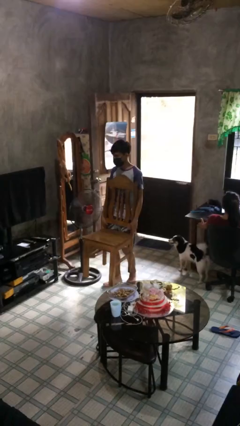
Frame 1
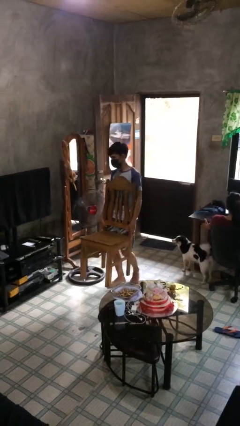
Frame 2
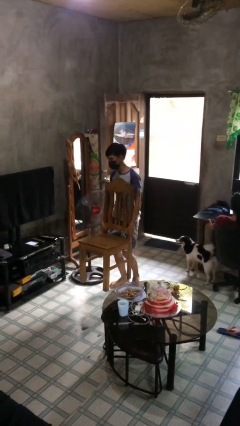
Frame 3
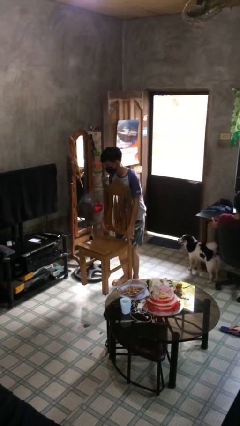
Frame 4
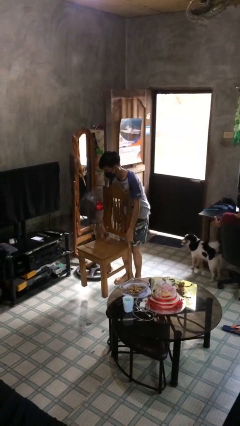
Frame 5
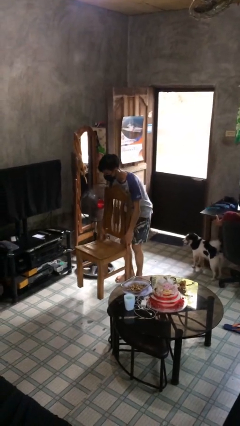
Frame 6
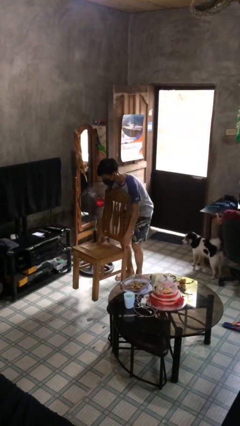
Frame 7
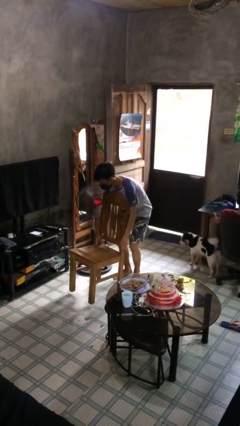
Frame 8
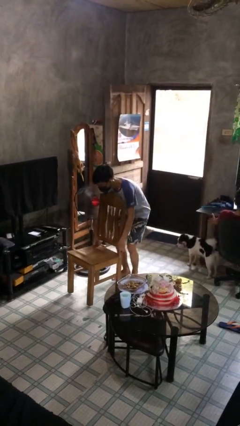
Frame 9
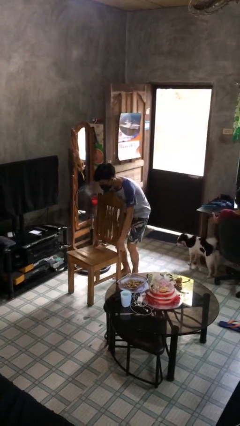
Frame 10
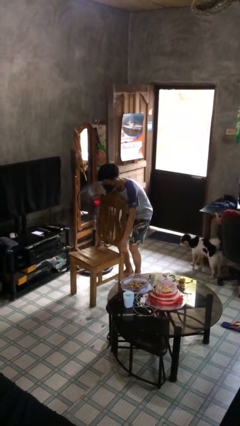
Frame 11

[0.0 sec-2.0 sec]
person puts down object on floor

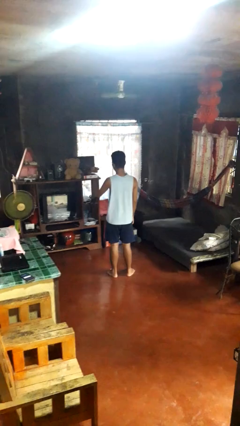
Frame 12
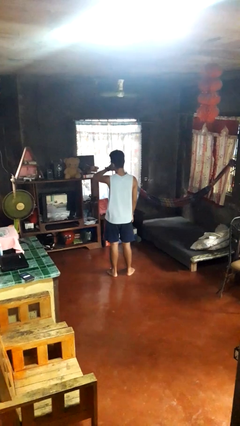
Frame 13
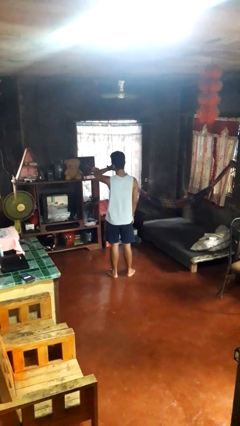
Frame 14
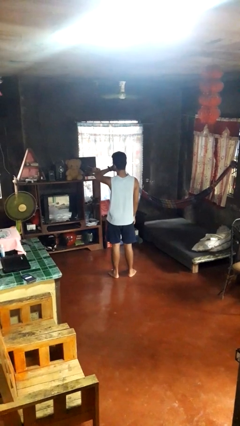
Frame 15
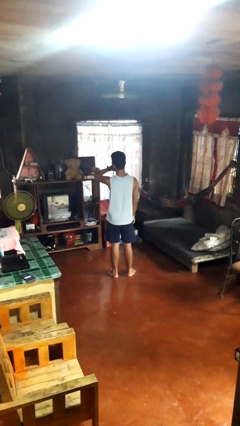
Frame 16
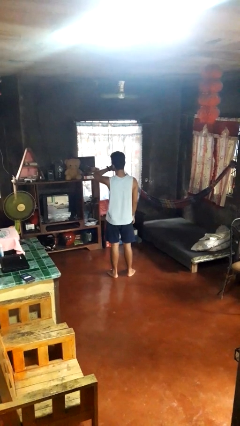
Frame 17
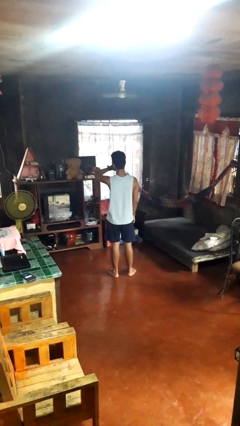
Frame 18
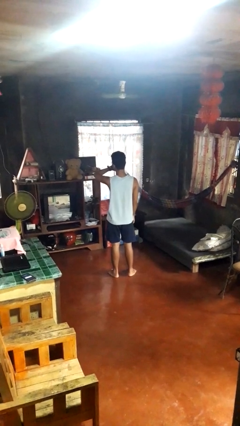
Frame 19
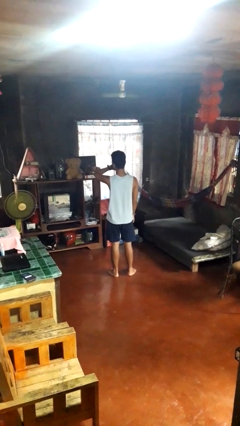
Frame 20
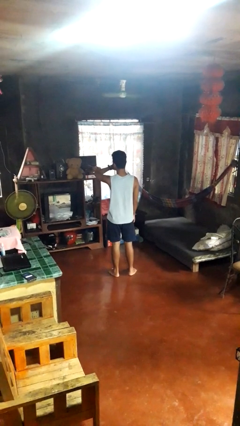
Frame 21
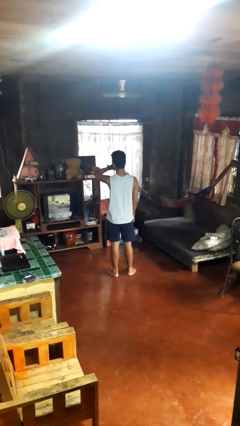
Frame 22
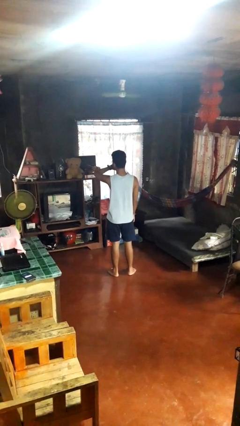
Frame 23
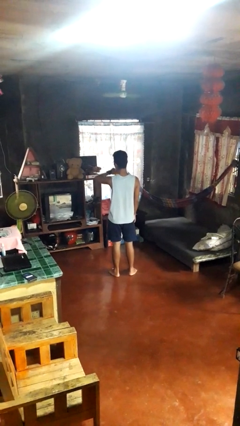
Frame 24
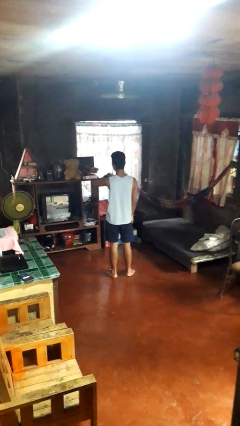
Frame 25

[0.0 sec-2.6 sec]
person looks at wristwatch

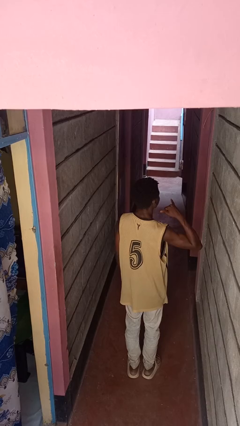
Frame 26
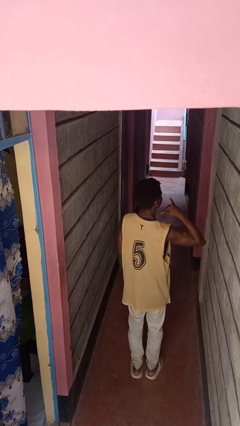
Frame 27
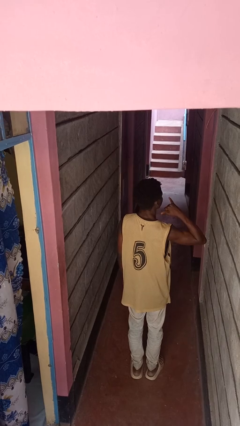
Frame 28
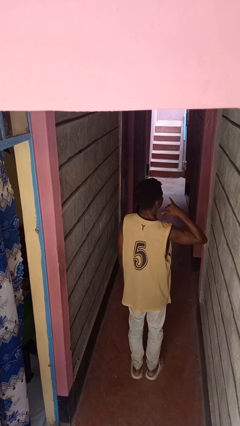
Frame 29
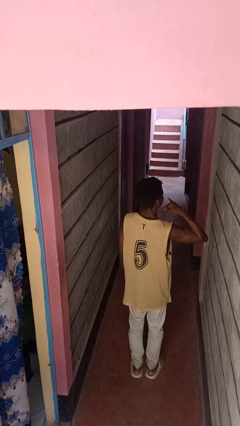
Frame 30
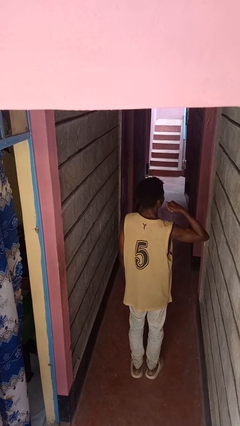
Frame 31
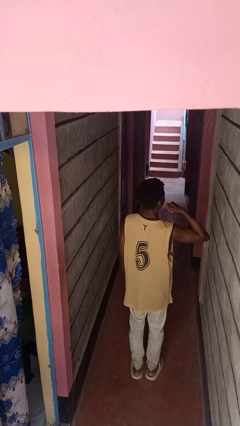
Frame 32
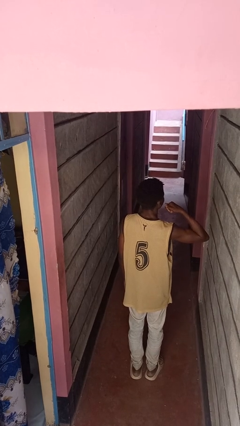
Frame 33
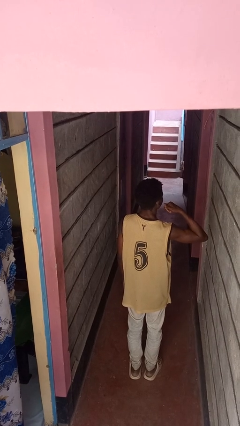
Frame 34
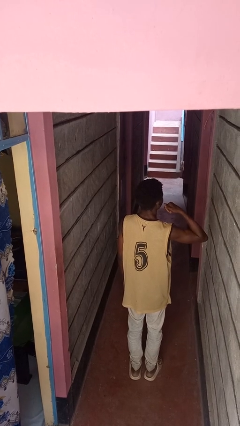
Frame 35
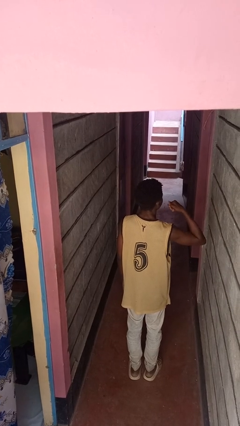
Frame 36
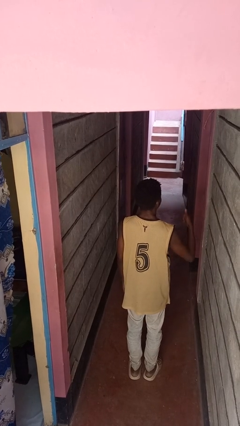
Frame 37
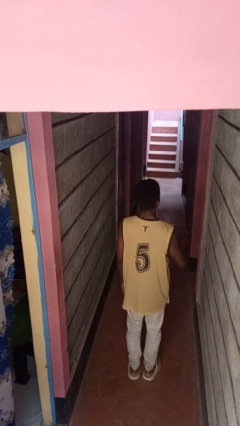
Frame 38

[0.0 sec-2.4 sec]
person gestures call me

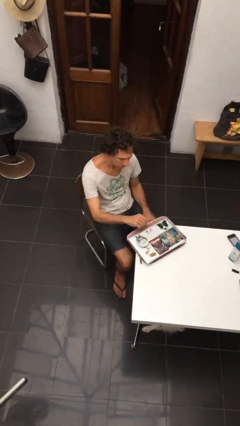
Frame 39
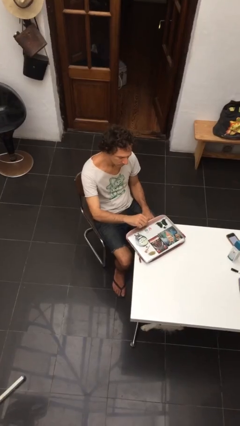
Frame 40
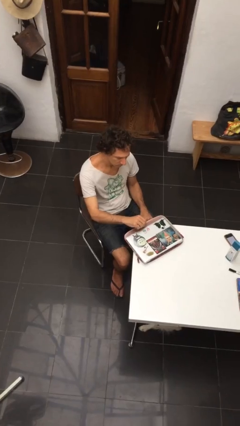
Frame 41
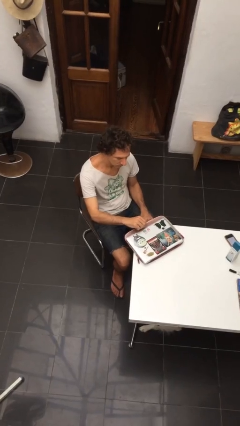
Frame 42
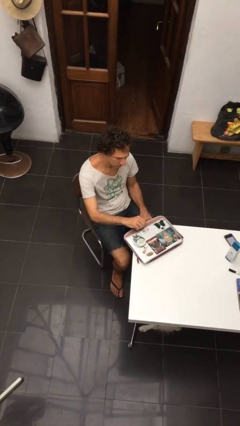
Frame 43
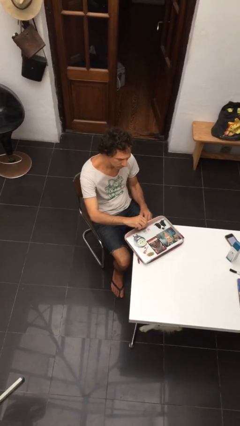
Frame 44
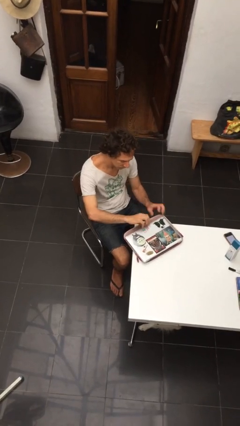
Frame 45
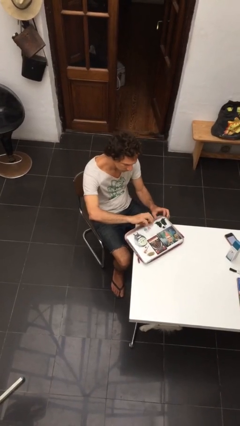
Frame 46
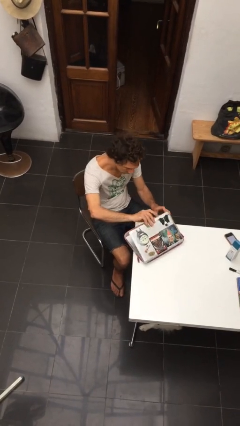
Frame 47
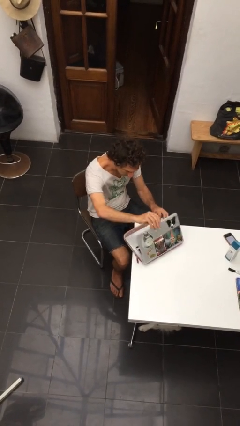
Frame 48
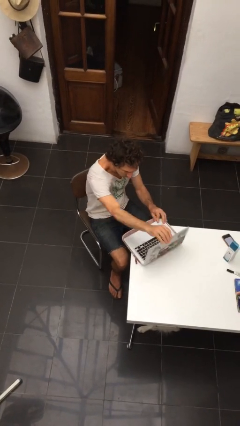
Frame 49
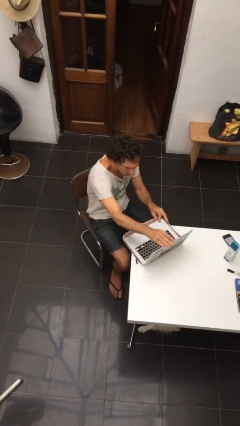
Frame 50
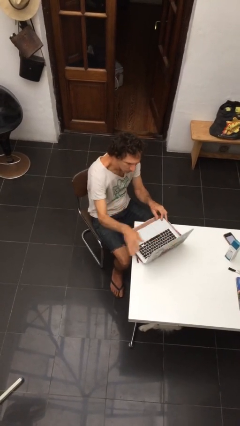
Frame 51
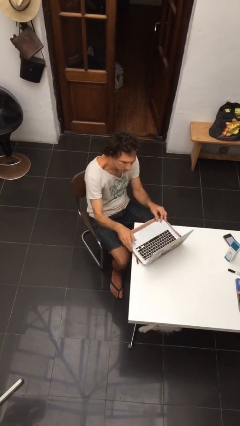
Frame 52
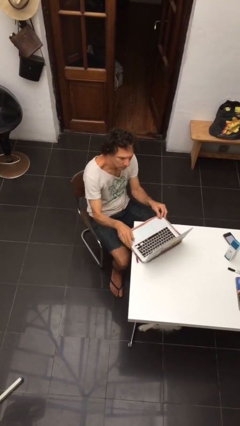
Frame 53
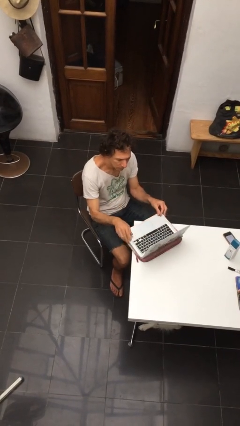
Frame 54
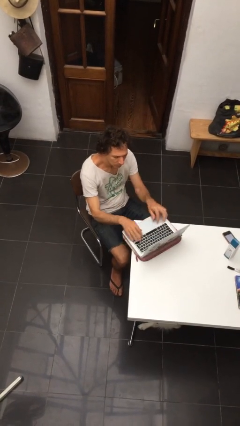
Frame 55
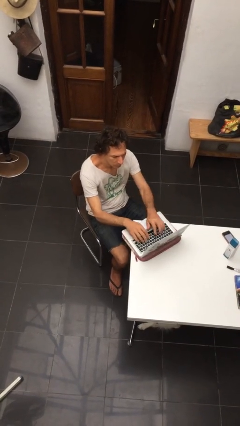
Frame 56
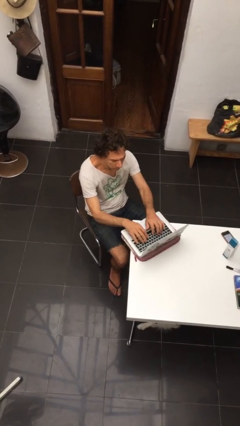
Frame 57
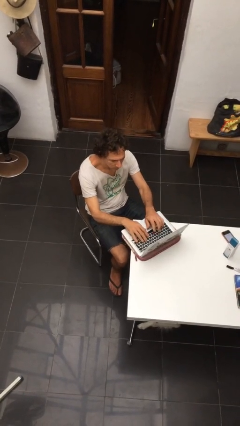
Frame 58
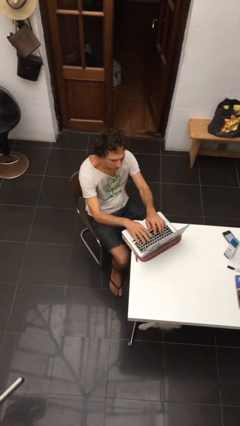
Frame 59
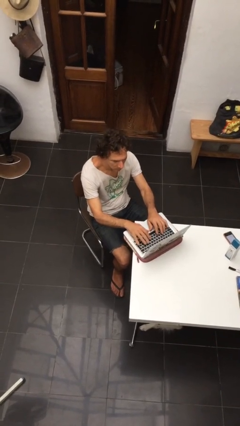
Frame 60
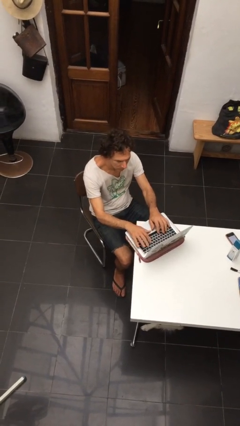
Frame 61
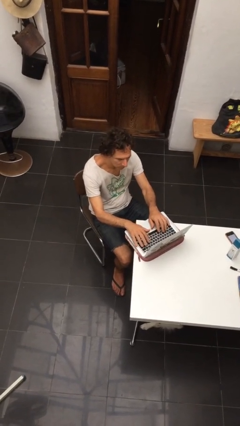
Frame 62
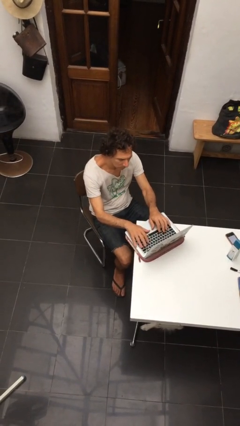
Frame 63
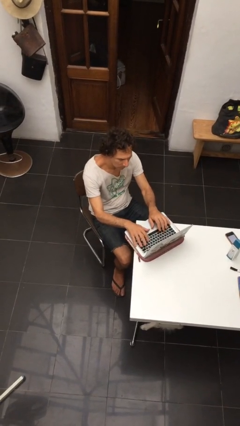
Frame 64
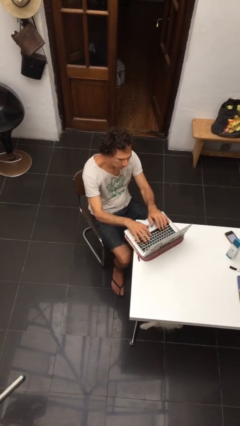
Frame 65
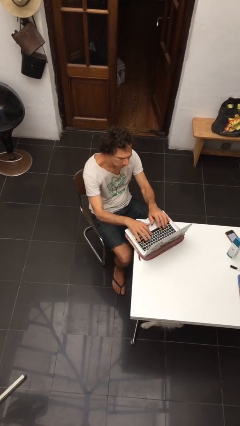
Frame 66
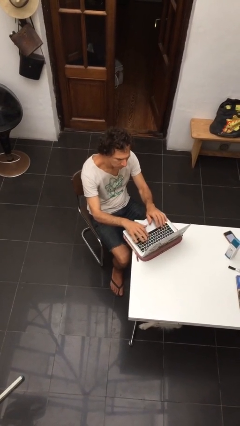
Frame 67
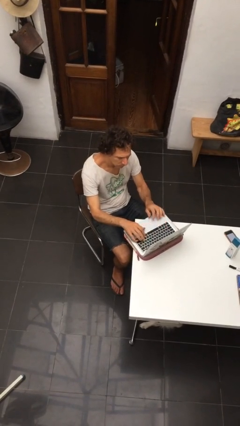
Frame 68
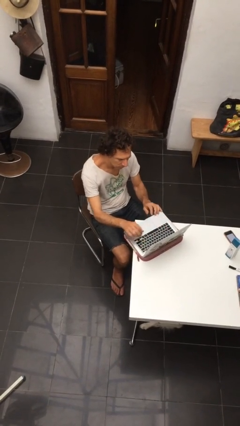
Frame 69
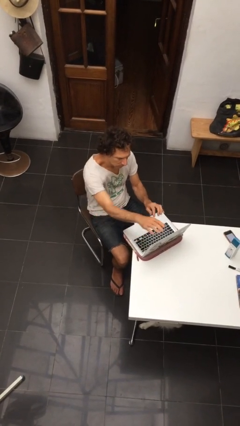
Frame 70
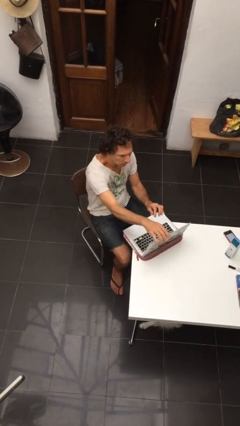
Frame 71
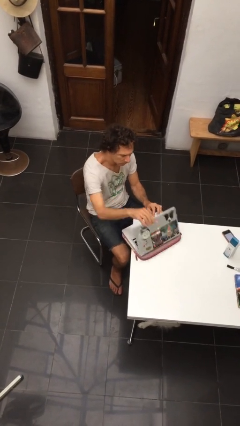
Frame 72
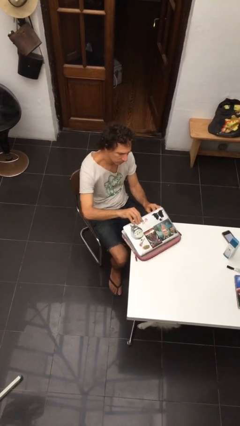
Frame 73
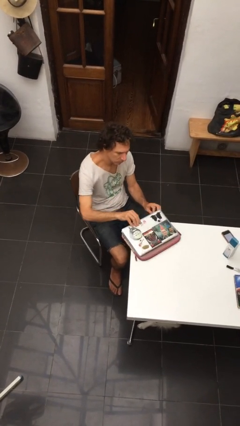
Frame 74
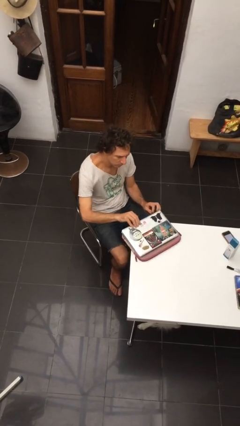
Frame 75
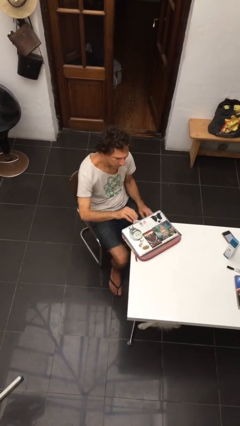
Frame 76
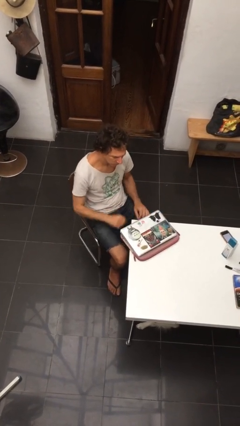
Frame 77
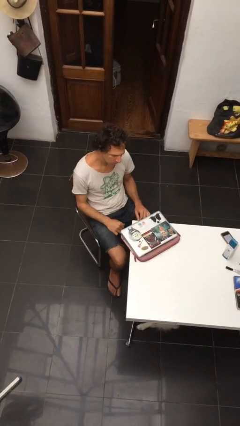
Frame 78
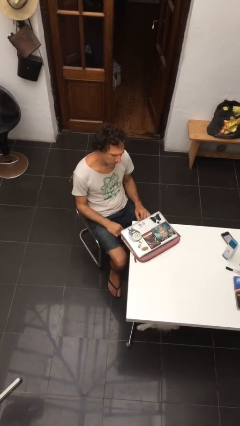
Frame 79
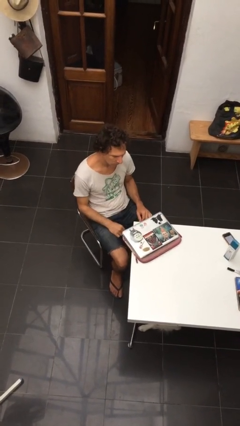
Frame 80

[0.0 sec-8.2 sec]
person interacts with laptop

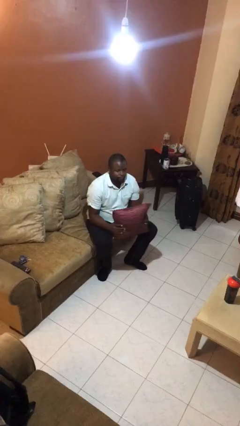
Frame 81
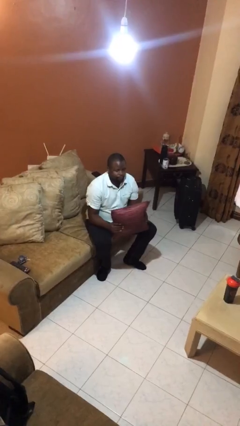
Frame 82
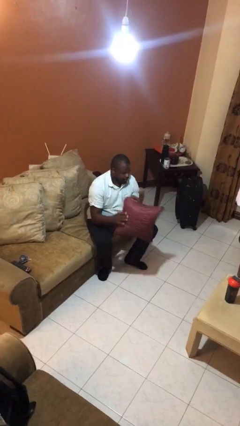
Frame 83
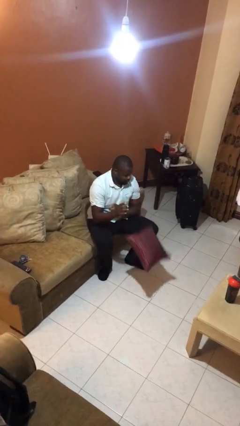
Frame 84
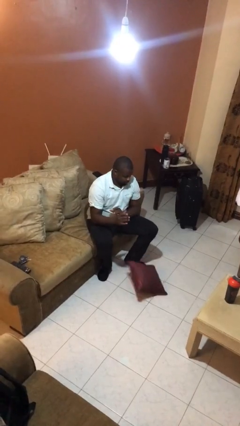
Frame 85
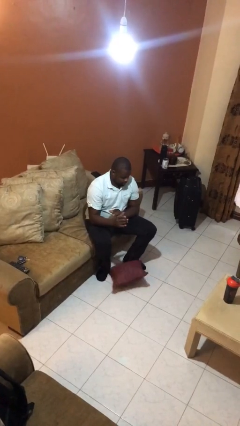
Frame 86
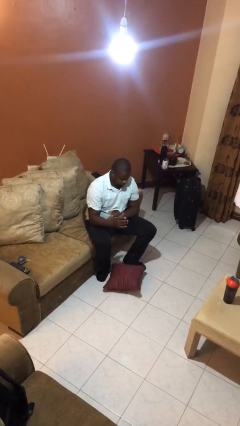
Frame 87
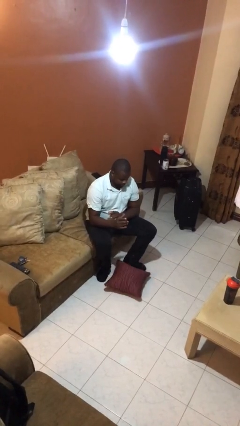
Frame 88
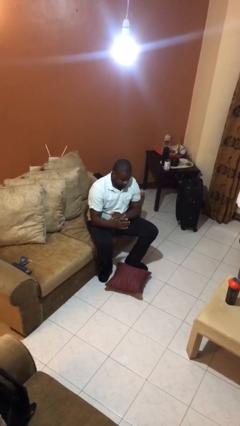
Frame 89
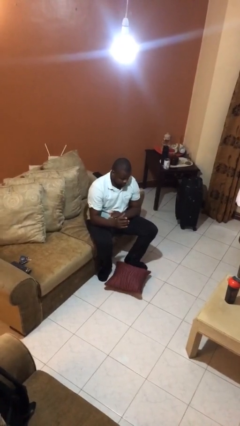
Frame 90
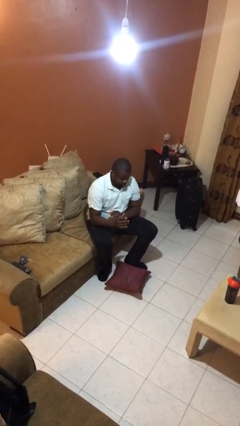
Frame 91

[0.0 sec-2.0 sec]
person drops object
